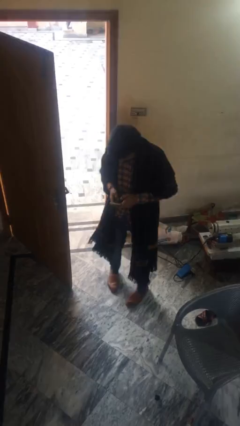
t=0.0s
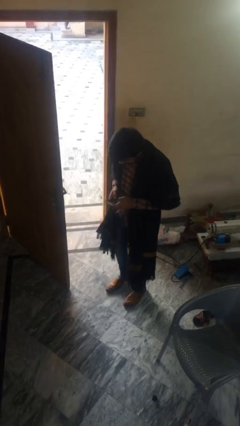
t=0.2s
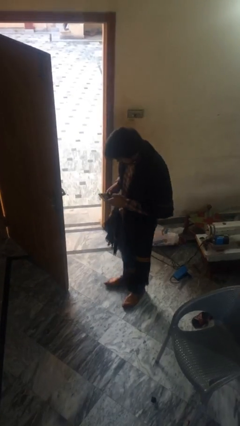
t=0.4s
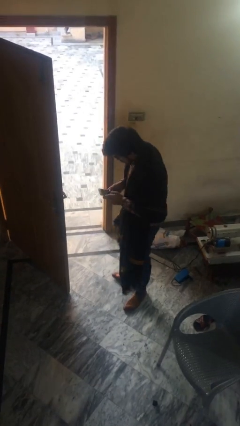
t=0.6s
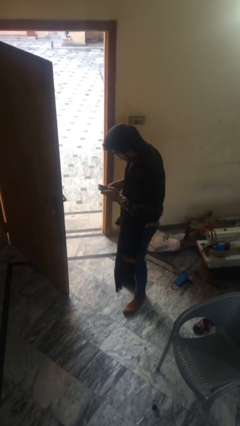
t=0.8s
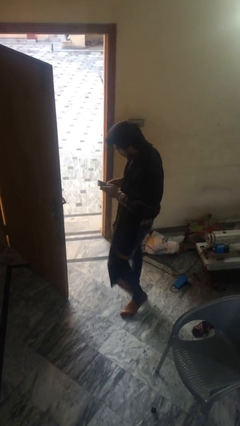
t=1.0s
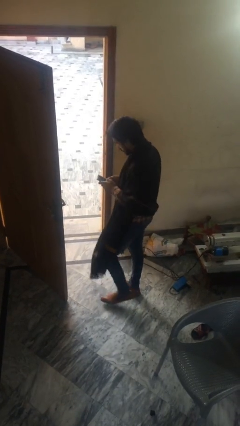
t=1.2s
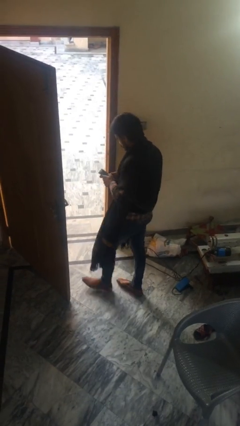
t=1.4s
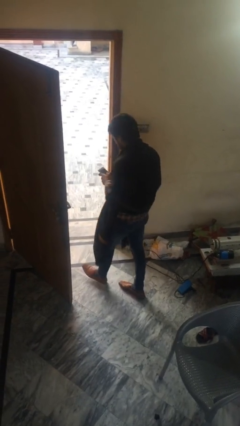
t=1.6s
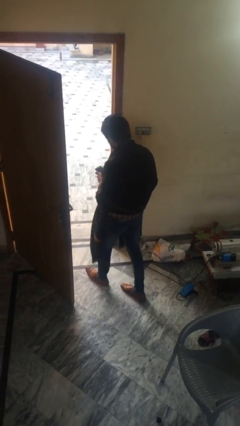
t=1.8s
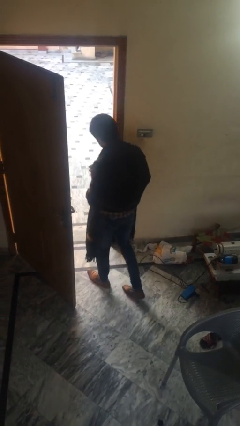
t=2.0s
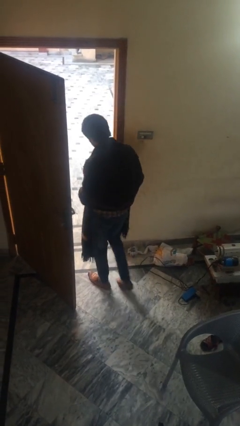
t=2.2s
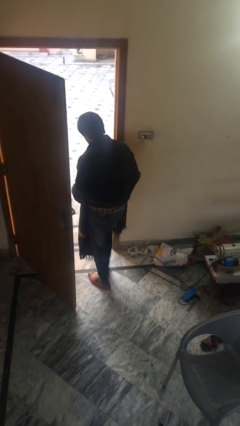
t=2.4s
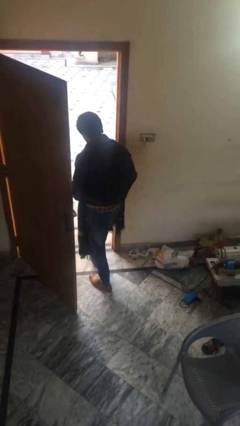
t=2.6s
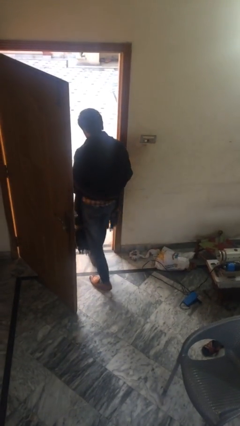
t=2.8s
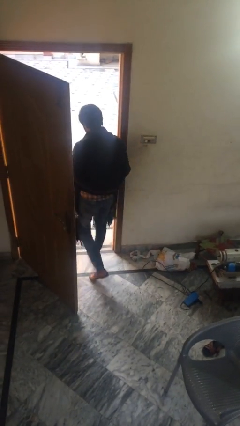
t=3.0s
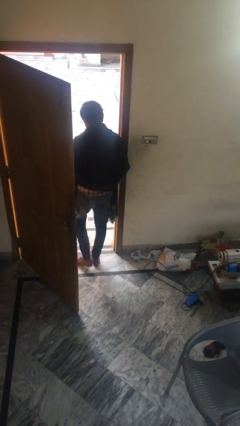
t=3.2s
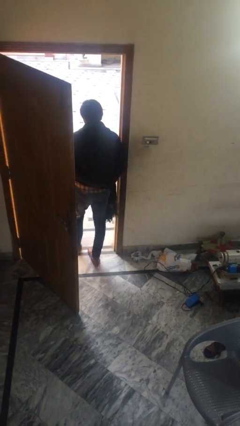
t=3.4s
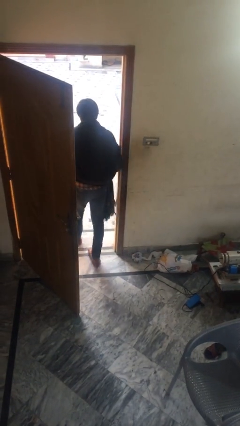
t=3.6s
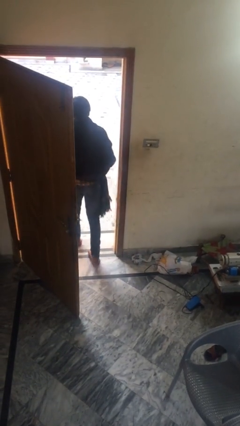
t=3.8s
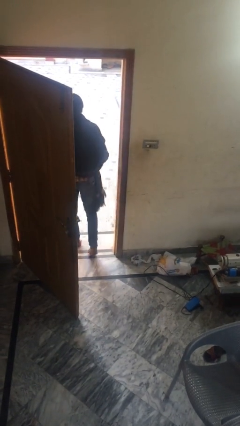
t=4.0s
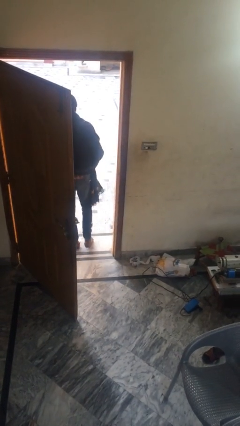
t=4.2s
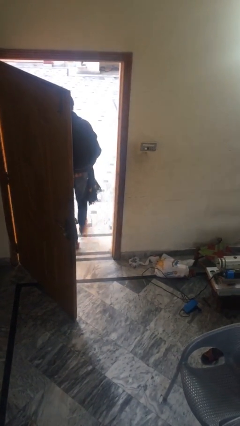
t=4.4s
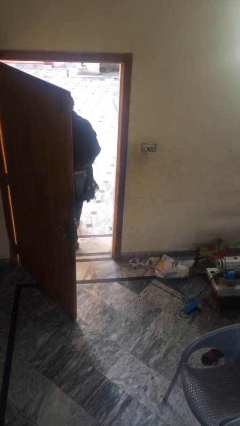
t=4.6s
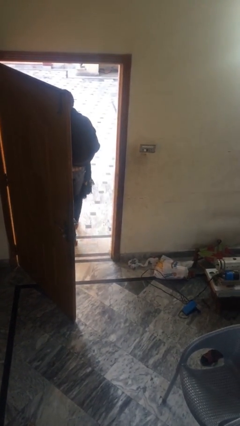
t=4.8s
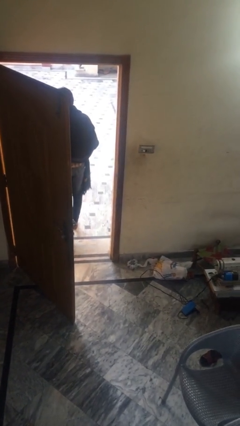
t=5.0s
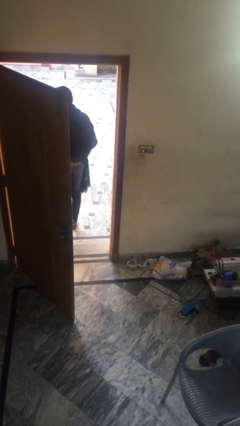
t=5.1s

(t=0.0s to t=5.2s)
person exits scene through structure

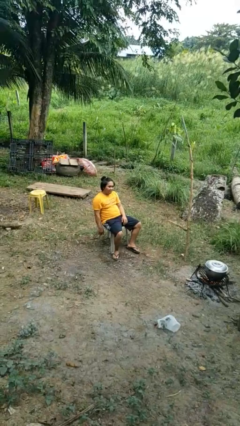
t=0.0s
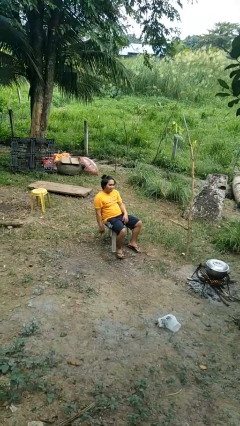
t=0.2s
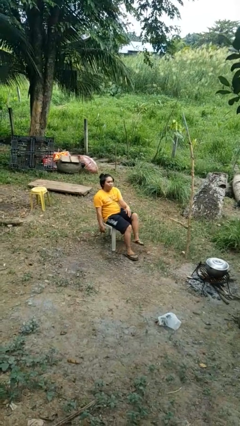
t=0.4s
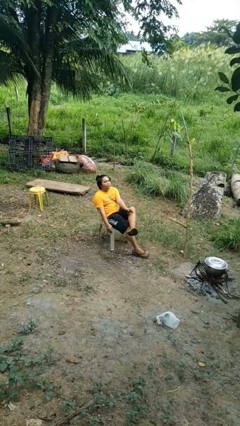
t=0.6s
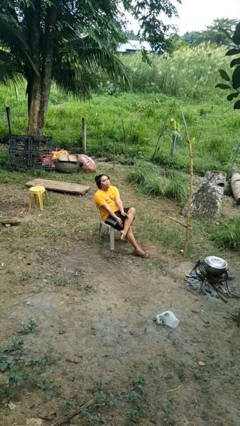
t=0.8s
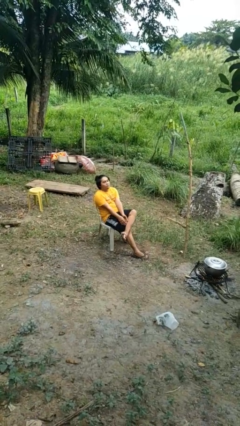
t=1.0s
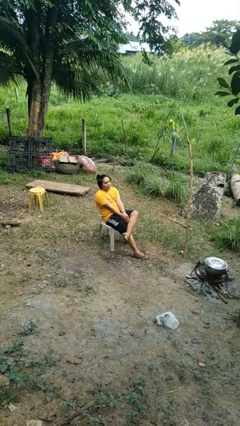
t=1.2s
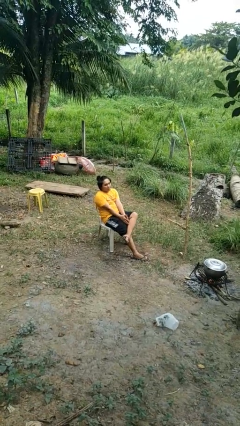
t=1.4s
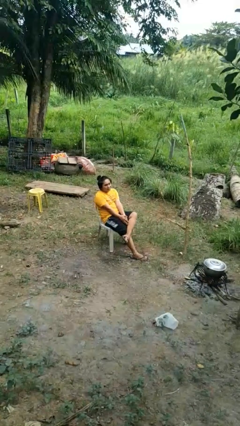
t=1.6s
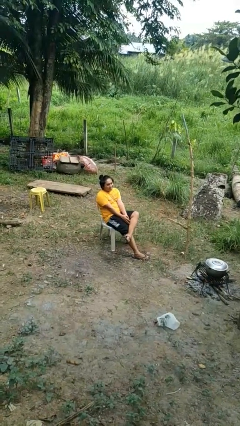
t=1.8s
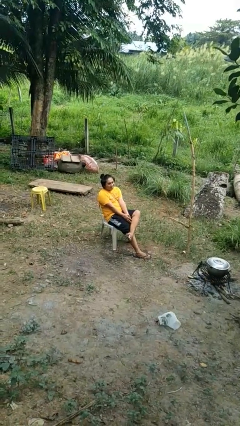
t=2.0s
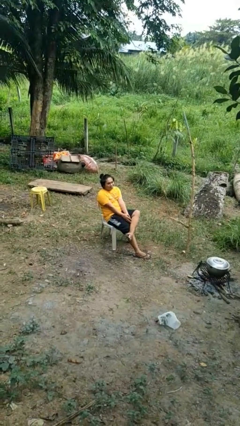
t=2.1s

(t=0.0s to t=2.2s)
person crosses legs

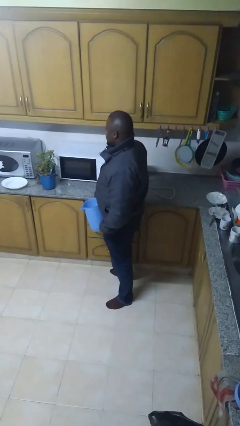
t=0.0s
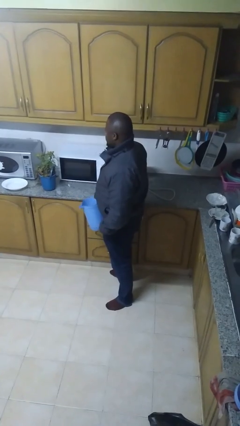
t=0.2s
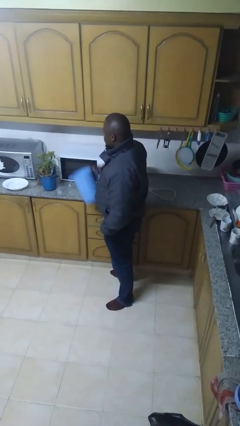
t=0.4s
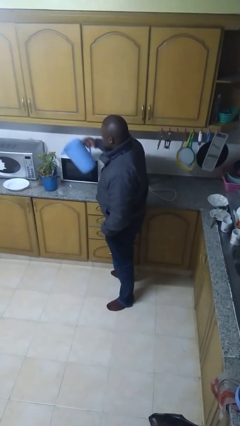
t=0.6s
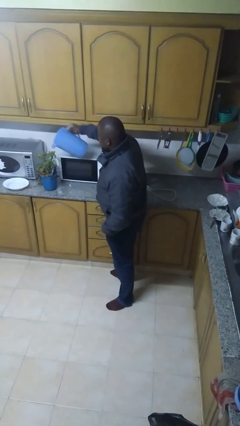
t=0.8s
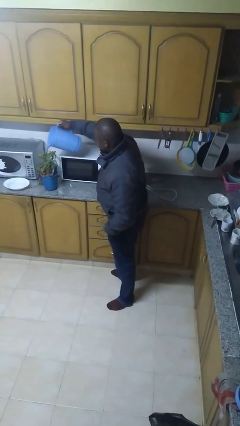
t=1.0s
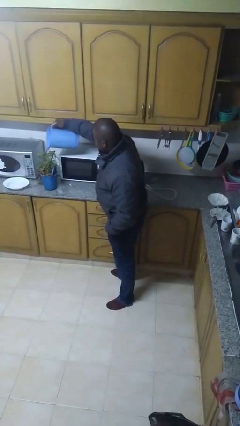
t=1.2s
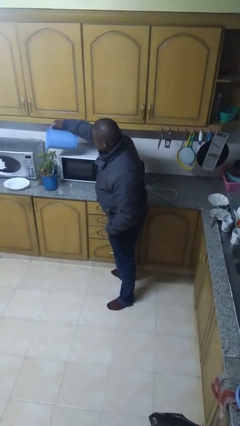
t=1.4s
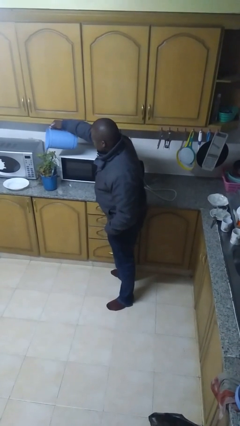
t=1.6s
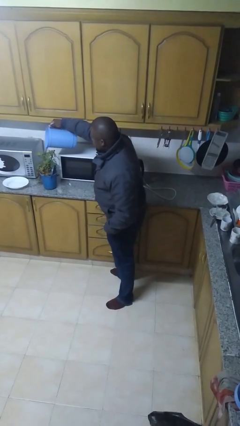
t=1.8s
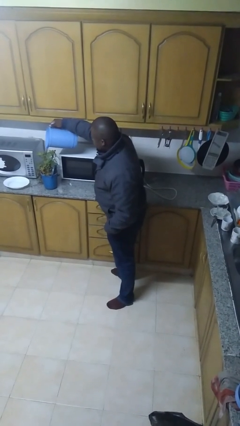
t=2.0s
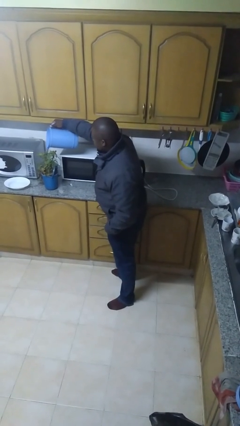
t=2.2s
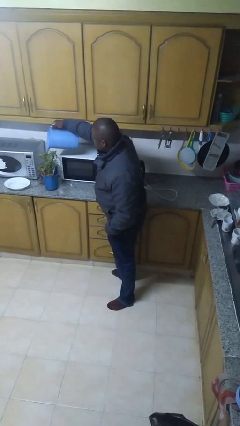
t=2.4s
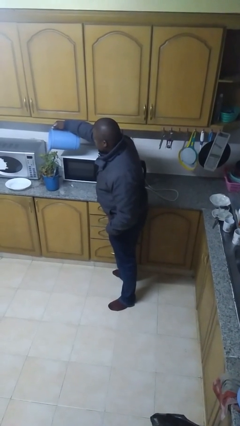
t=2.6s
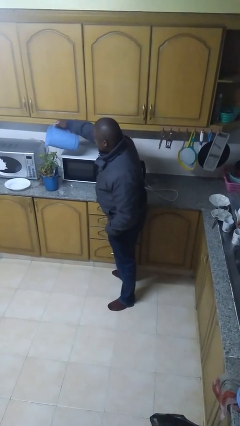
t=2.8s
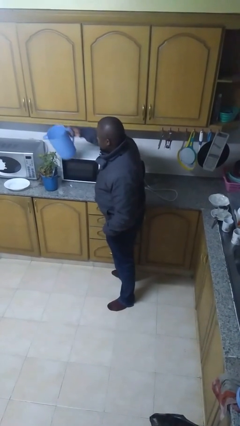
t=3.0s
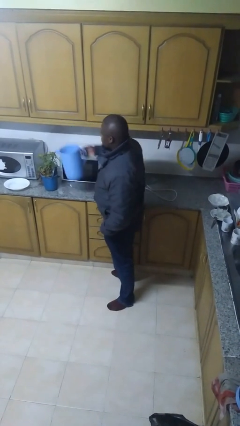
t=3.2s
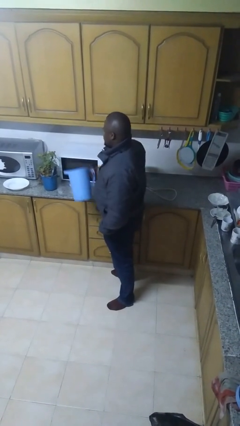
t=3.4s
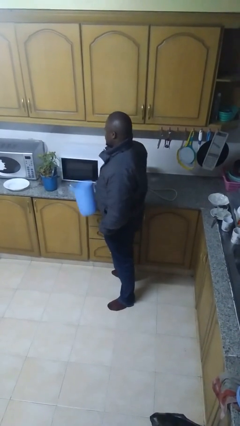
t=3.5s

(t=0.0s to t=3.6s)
person waters houseplant

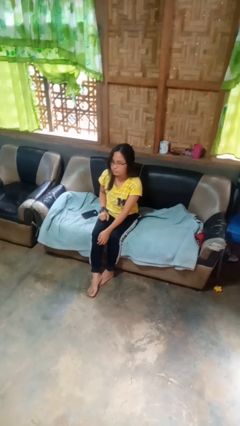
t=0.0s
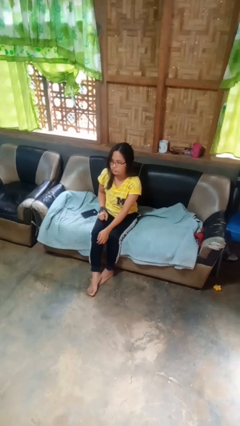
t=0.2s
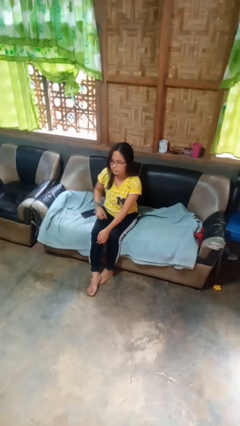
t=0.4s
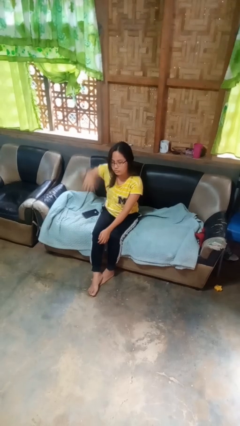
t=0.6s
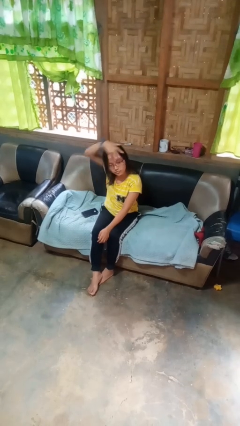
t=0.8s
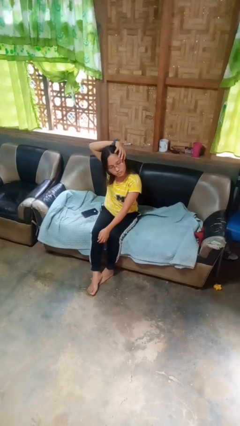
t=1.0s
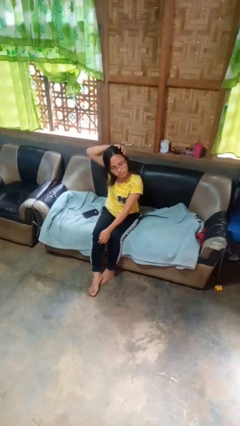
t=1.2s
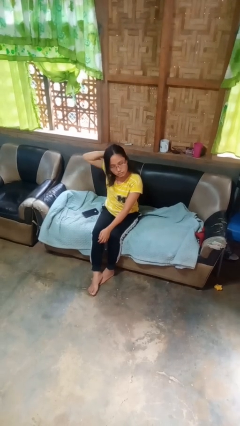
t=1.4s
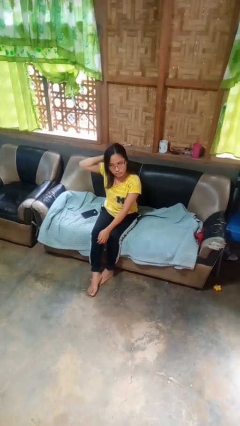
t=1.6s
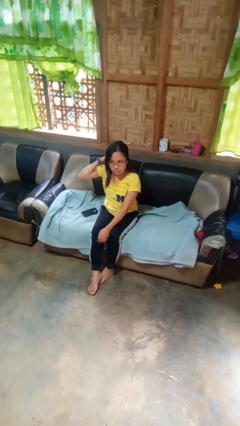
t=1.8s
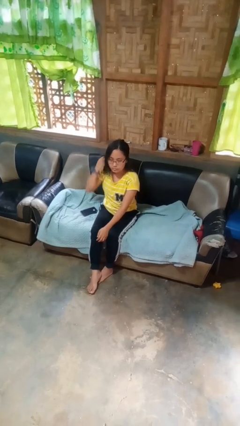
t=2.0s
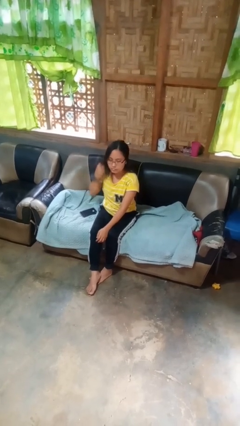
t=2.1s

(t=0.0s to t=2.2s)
person strokes hair

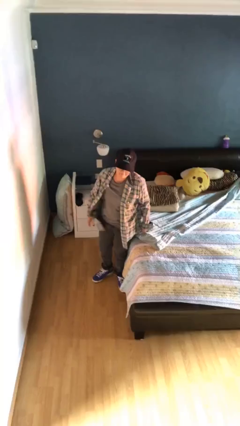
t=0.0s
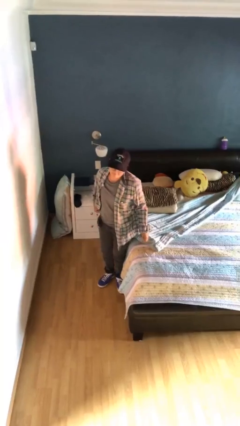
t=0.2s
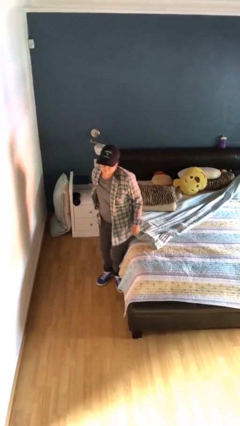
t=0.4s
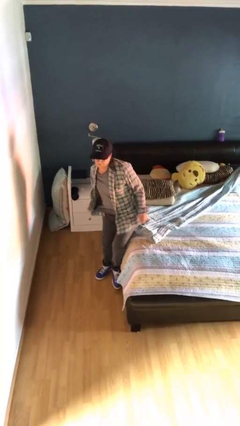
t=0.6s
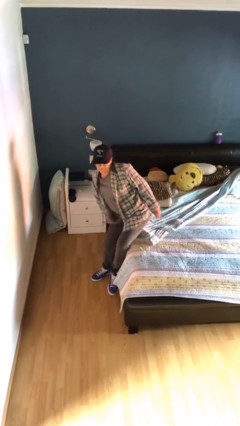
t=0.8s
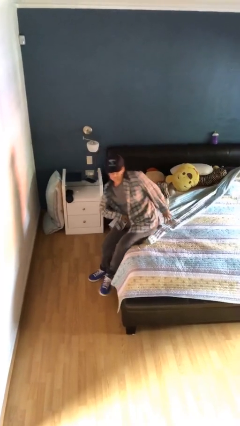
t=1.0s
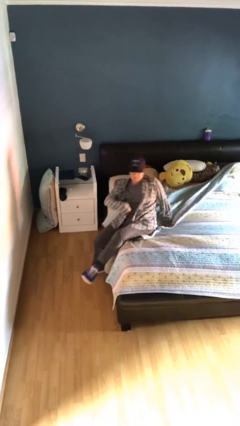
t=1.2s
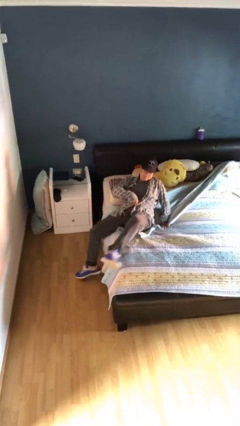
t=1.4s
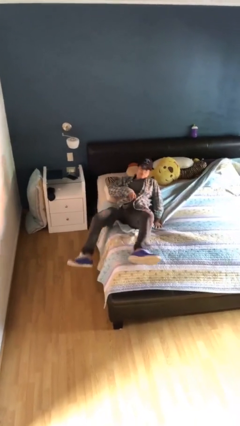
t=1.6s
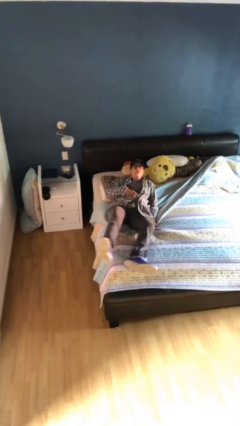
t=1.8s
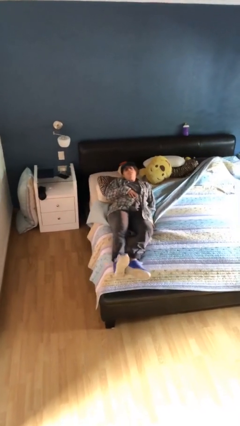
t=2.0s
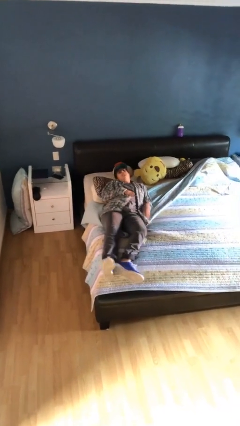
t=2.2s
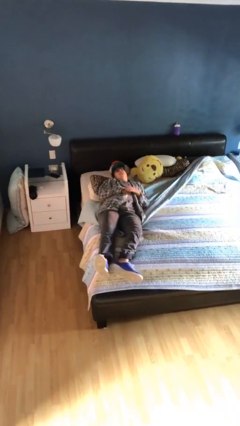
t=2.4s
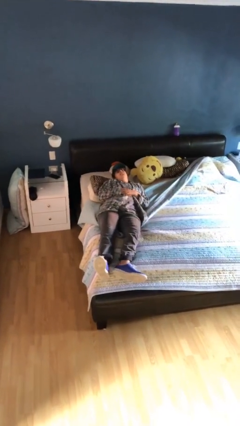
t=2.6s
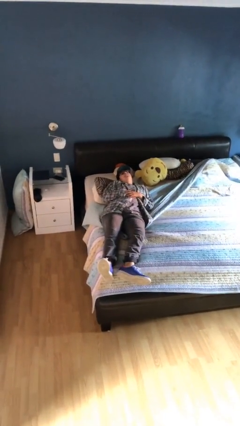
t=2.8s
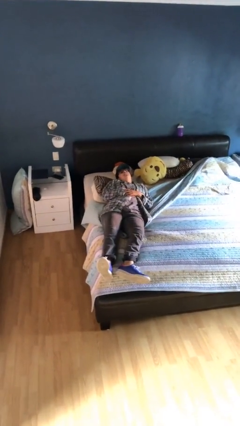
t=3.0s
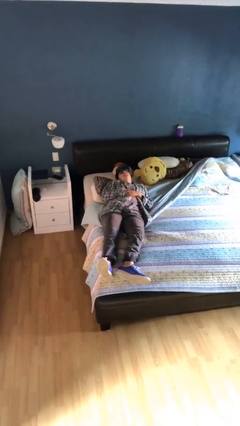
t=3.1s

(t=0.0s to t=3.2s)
person lies down on bed

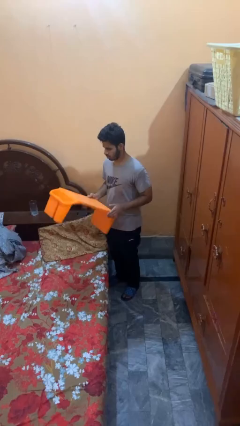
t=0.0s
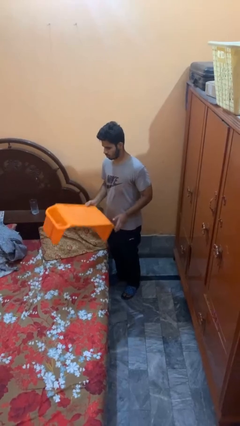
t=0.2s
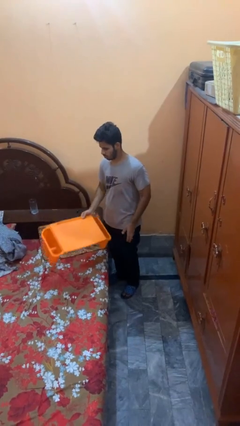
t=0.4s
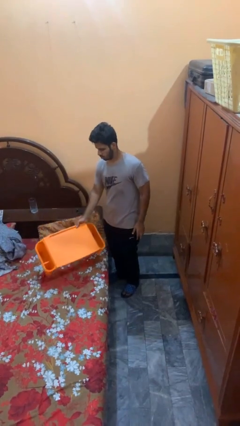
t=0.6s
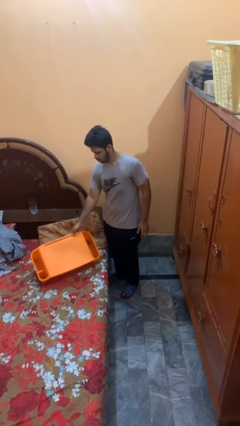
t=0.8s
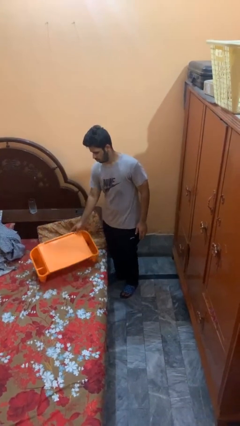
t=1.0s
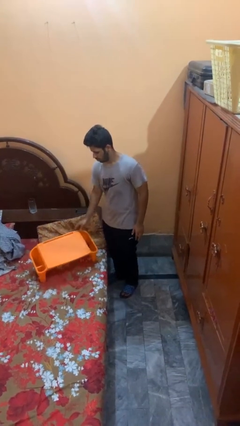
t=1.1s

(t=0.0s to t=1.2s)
person puts down object on bed
